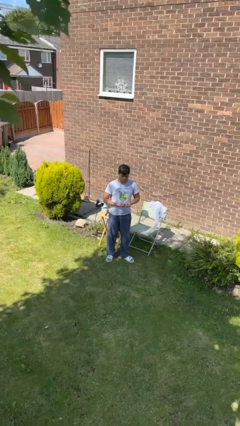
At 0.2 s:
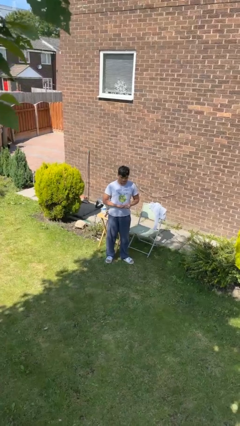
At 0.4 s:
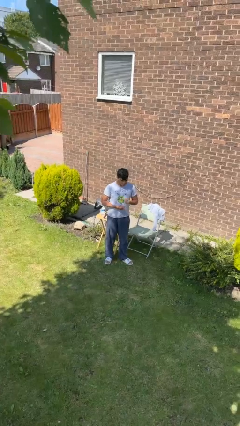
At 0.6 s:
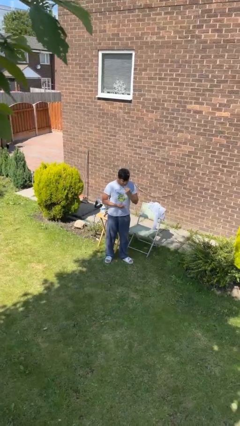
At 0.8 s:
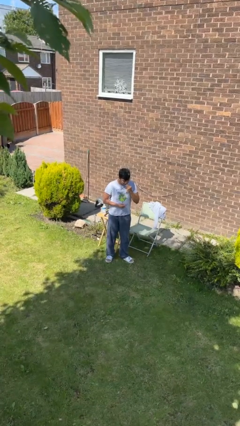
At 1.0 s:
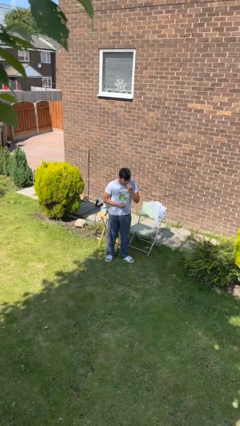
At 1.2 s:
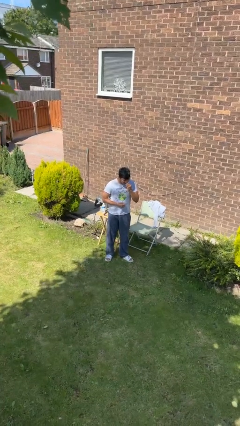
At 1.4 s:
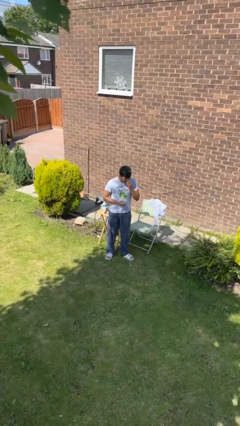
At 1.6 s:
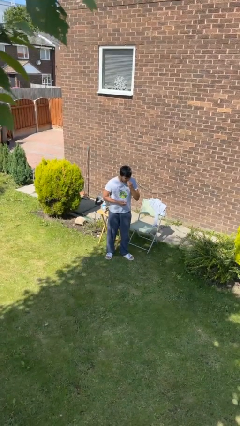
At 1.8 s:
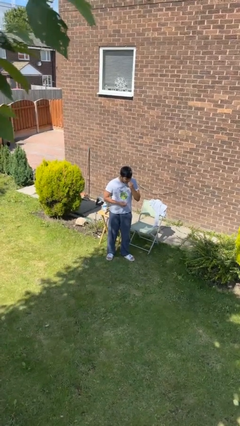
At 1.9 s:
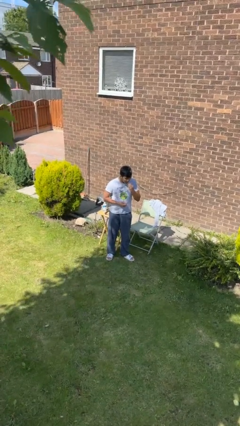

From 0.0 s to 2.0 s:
person flosses

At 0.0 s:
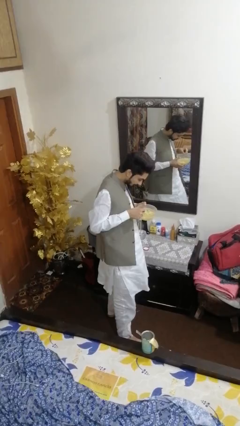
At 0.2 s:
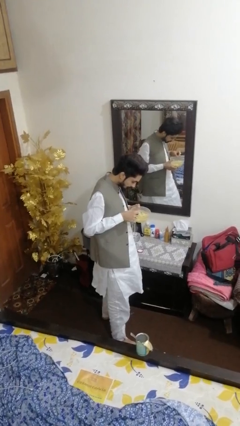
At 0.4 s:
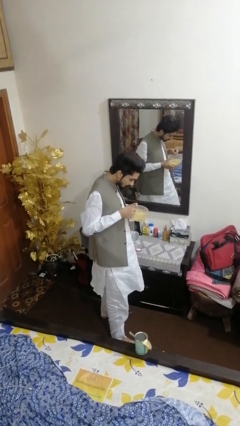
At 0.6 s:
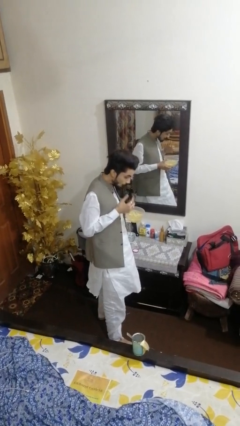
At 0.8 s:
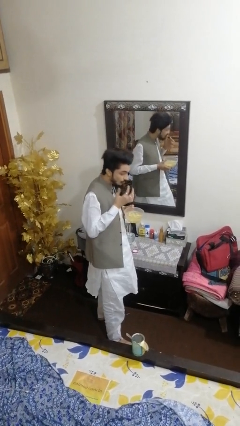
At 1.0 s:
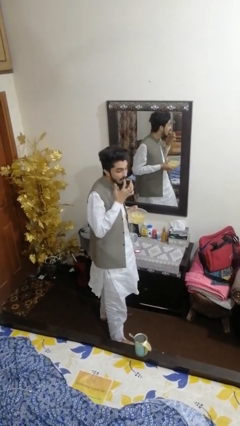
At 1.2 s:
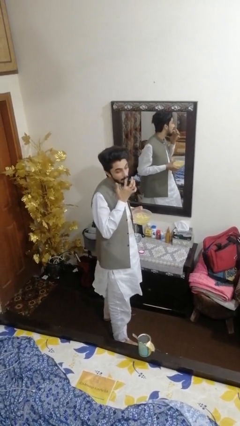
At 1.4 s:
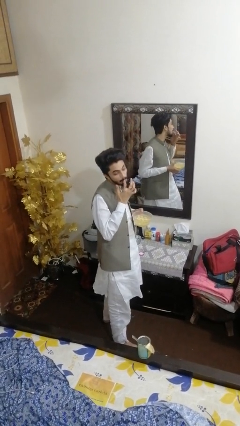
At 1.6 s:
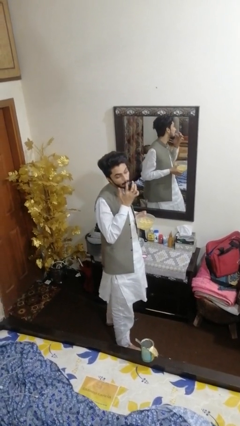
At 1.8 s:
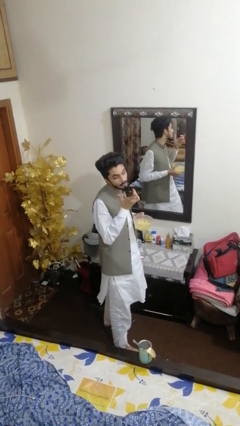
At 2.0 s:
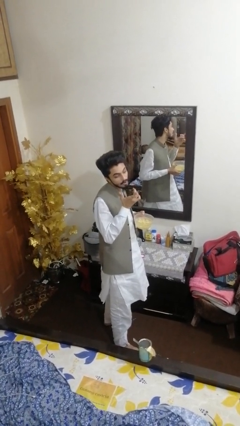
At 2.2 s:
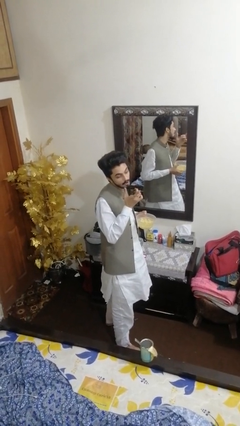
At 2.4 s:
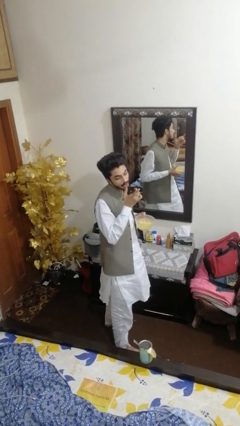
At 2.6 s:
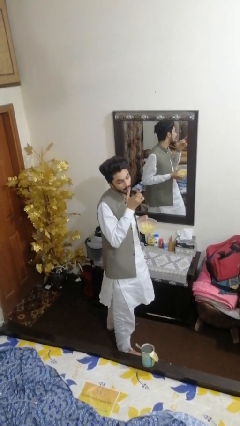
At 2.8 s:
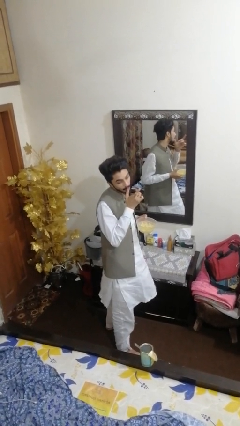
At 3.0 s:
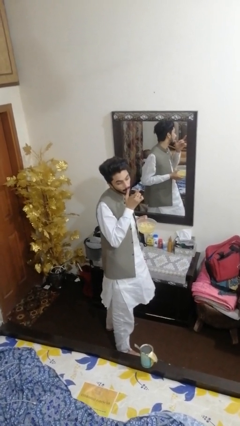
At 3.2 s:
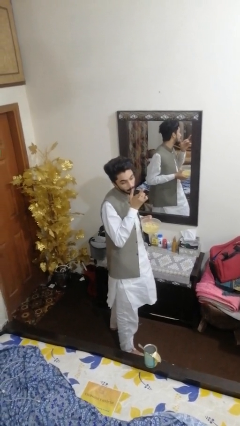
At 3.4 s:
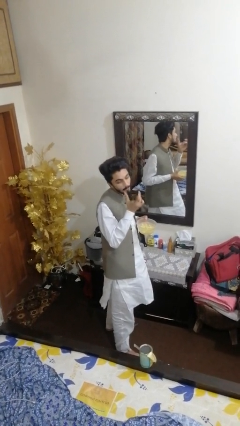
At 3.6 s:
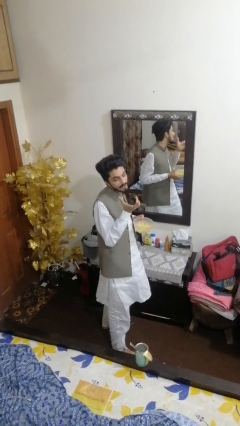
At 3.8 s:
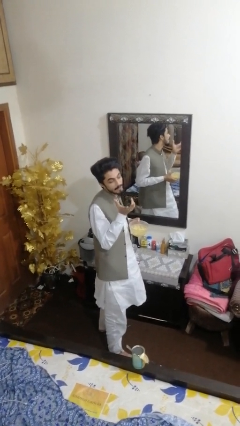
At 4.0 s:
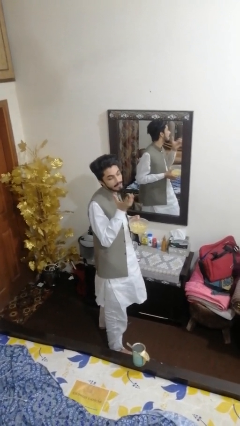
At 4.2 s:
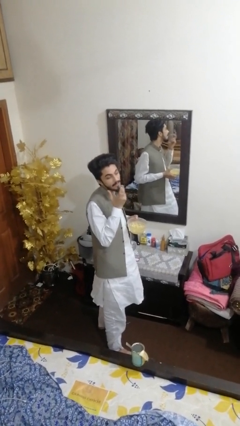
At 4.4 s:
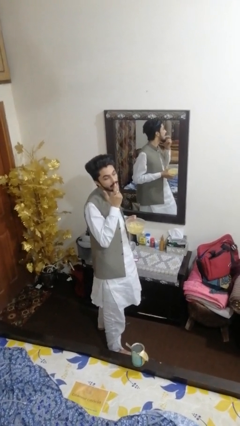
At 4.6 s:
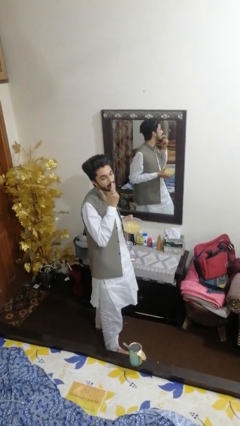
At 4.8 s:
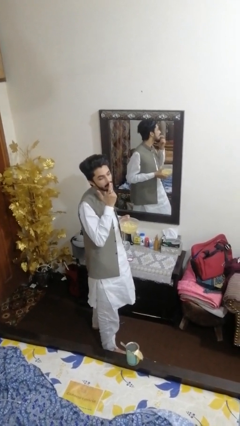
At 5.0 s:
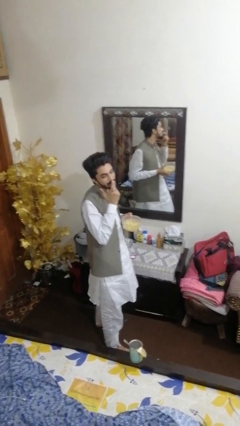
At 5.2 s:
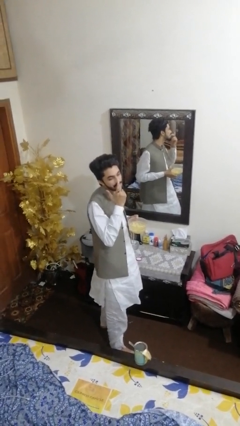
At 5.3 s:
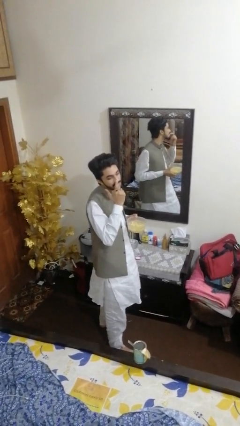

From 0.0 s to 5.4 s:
person licks fingers

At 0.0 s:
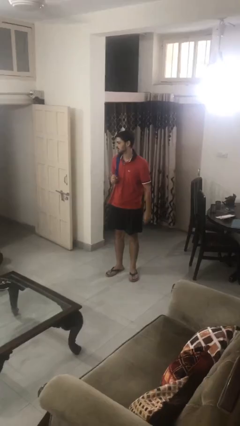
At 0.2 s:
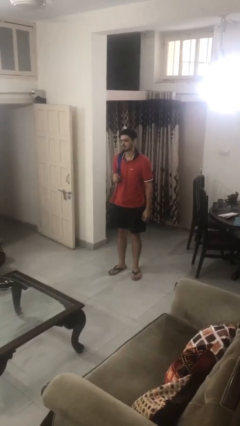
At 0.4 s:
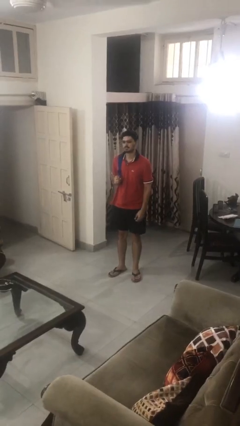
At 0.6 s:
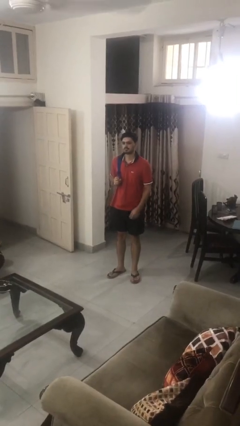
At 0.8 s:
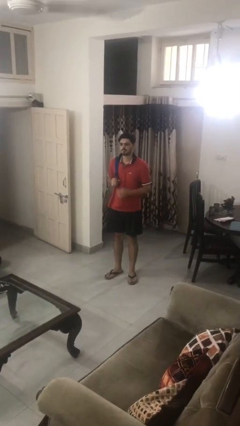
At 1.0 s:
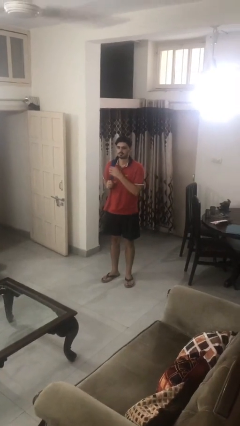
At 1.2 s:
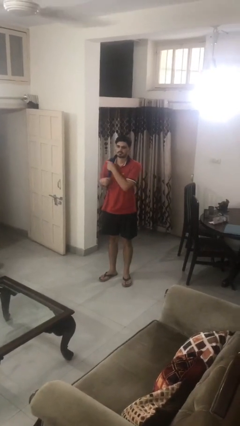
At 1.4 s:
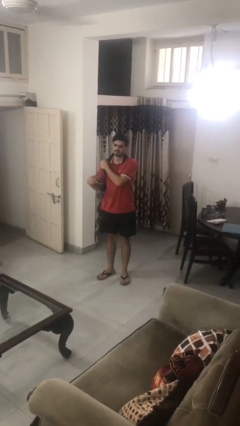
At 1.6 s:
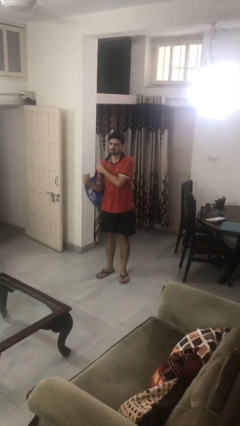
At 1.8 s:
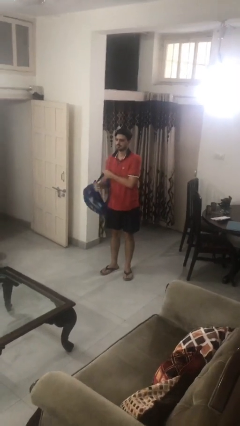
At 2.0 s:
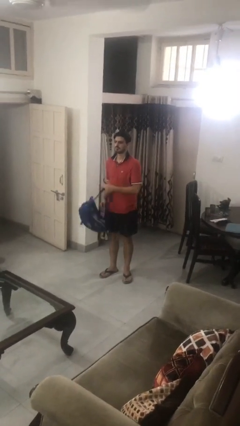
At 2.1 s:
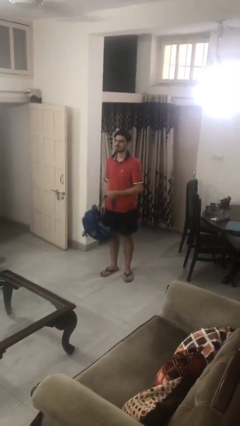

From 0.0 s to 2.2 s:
person takes off backpack

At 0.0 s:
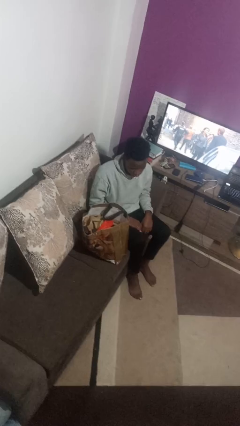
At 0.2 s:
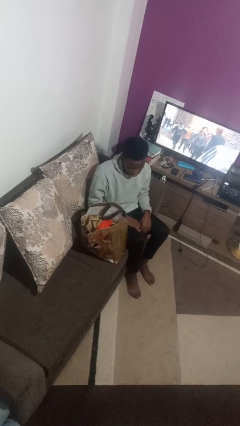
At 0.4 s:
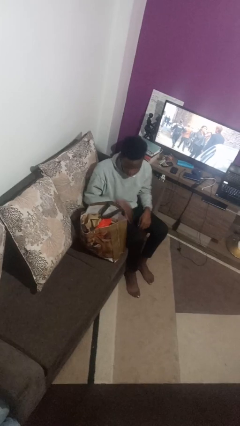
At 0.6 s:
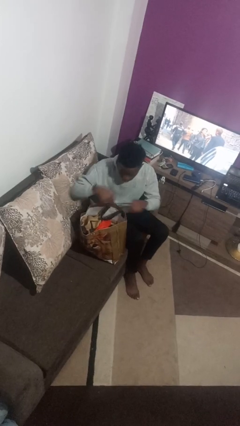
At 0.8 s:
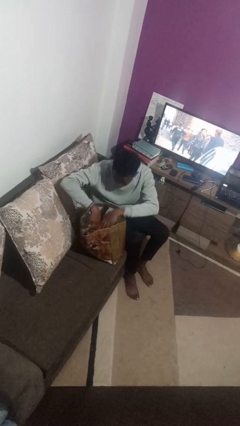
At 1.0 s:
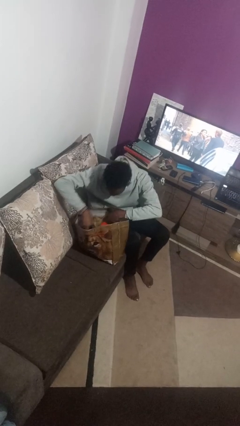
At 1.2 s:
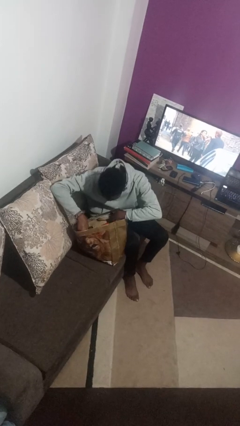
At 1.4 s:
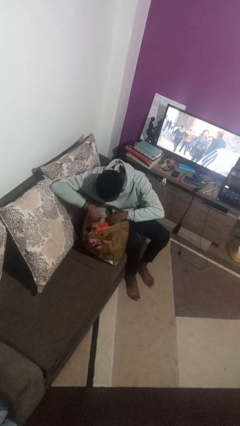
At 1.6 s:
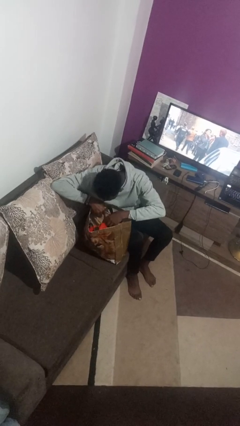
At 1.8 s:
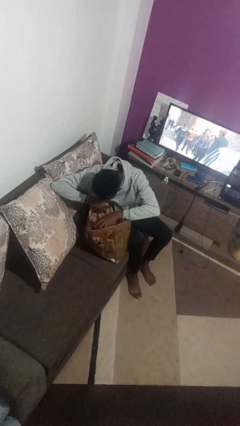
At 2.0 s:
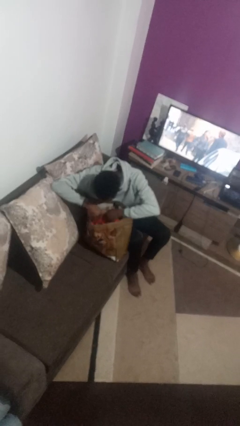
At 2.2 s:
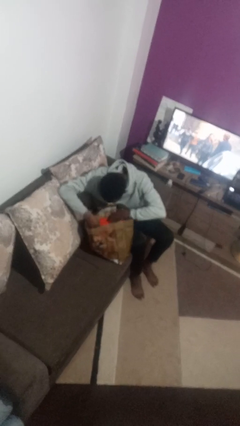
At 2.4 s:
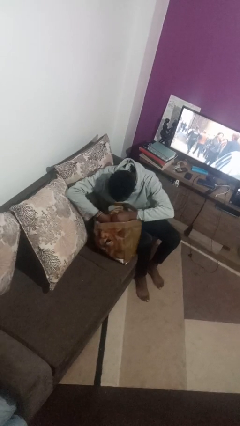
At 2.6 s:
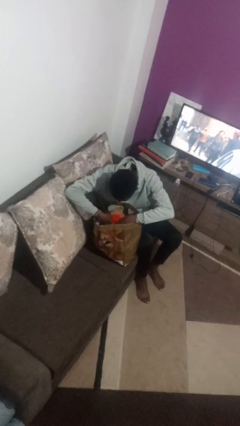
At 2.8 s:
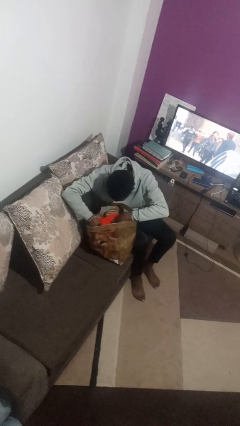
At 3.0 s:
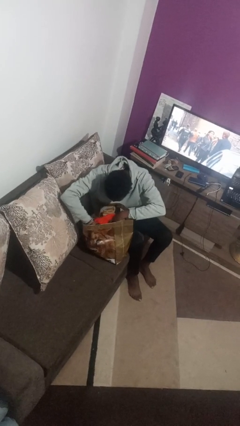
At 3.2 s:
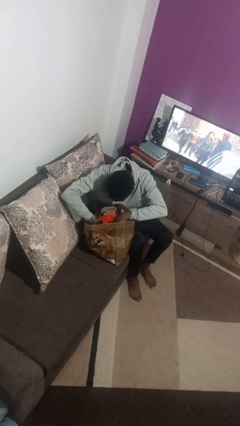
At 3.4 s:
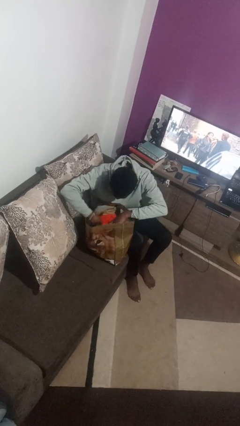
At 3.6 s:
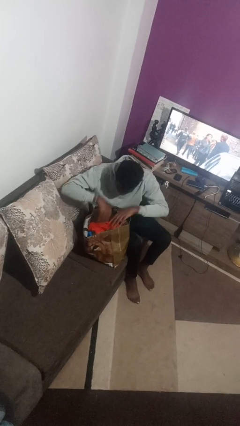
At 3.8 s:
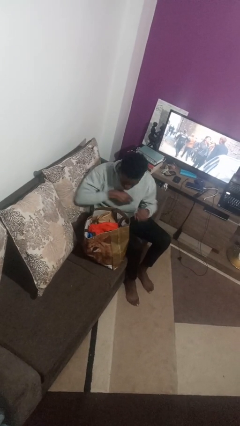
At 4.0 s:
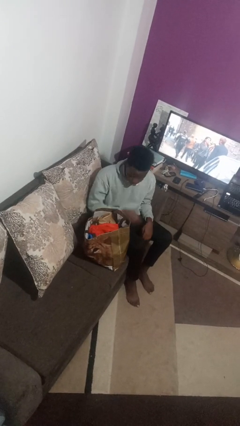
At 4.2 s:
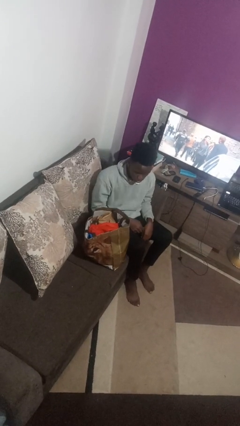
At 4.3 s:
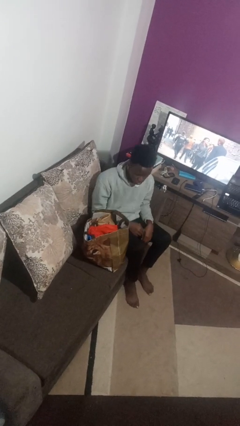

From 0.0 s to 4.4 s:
person searches in bag

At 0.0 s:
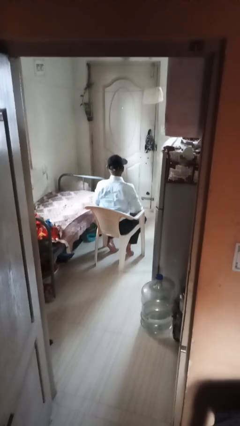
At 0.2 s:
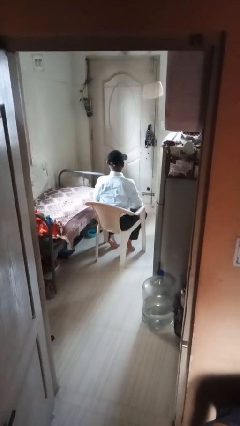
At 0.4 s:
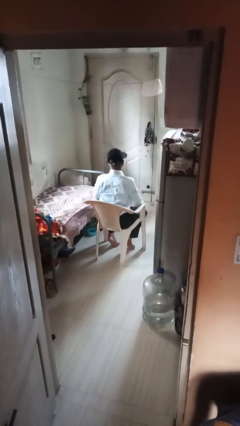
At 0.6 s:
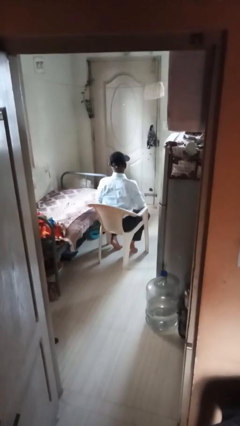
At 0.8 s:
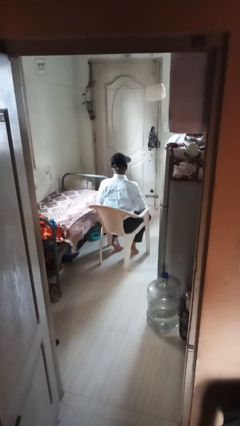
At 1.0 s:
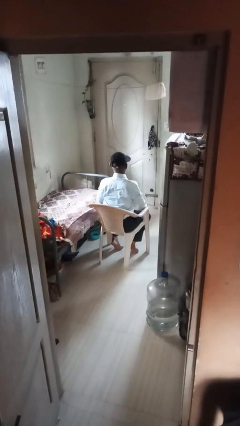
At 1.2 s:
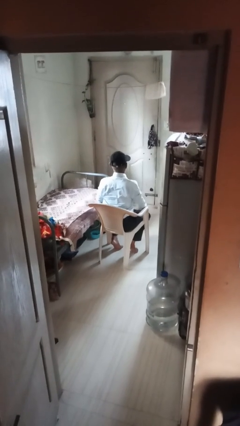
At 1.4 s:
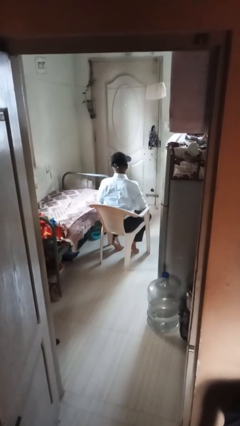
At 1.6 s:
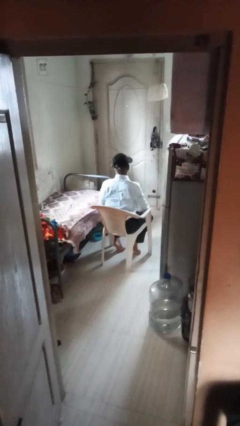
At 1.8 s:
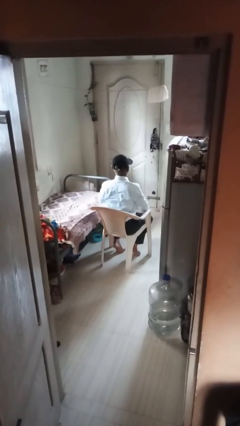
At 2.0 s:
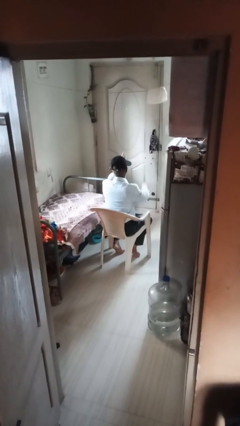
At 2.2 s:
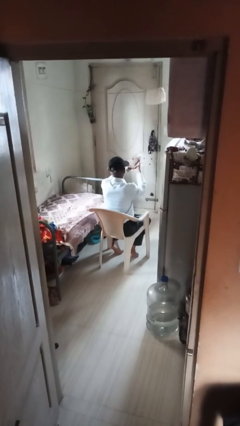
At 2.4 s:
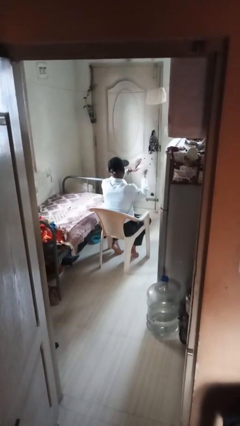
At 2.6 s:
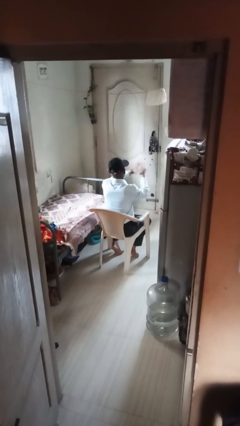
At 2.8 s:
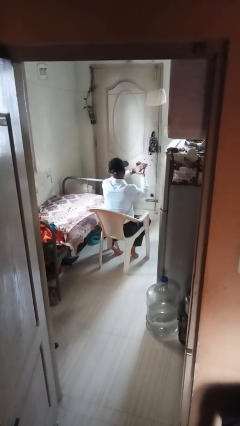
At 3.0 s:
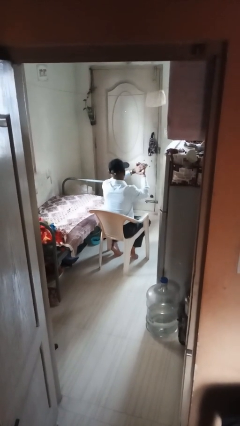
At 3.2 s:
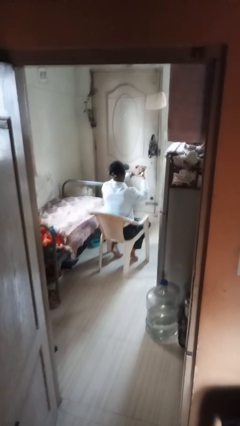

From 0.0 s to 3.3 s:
person claps hands
